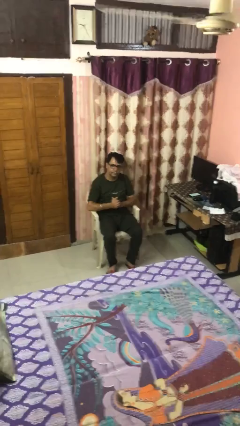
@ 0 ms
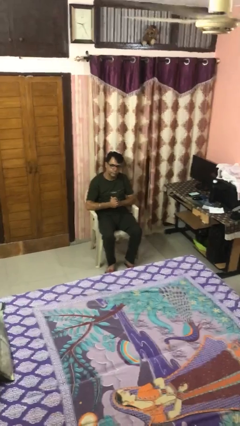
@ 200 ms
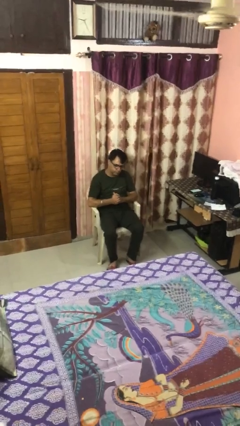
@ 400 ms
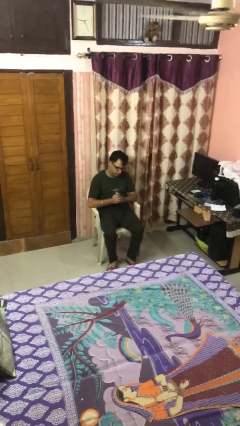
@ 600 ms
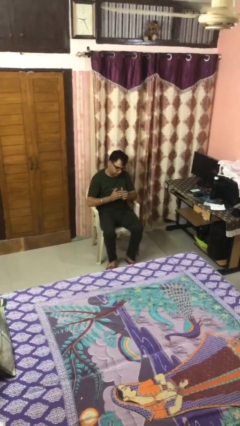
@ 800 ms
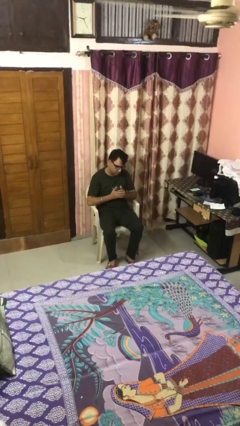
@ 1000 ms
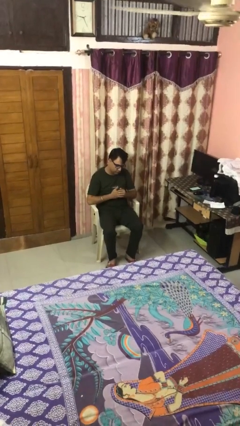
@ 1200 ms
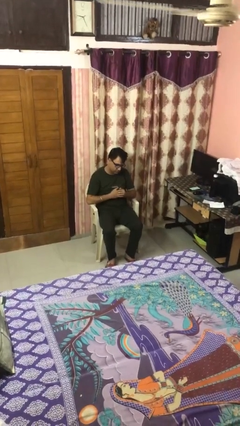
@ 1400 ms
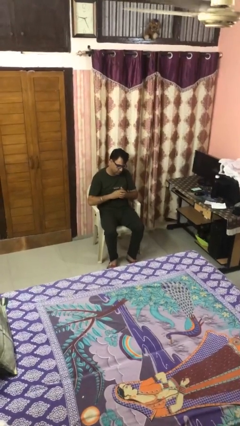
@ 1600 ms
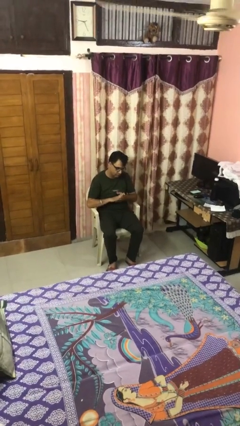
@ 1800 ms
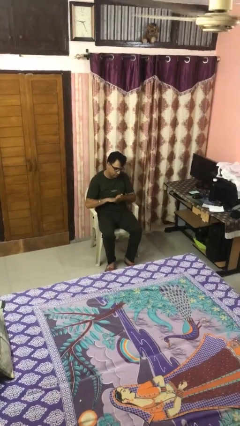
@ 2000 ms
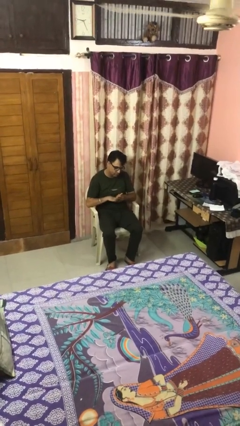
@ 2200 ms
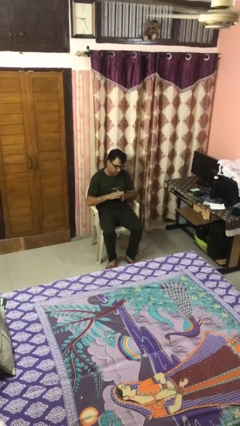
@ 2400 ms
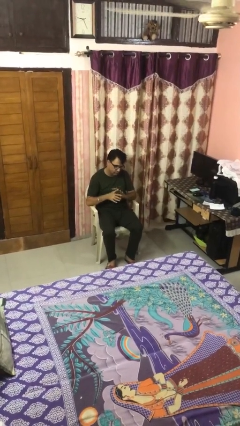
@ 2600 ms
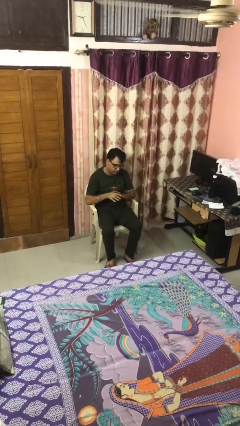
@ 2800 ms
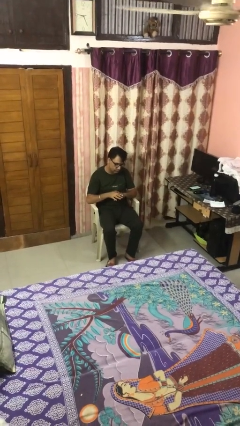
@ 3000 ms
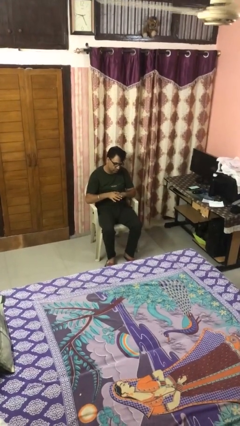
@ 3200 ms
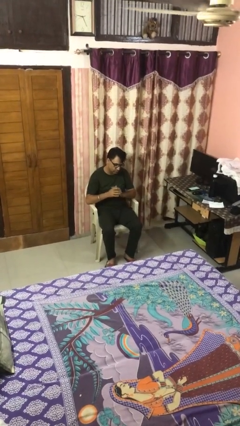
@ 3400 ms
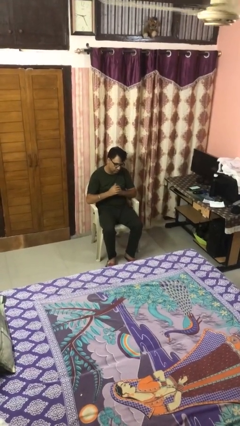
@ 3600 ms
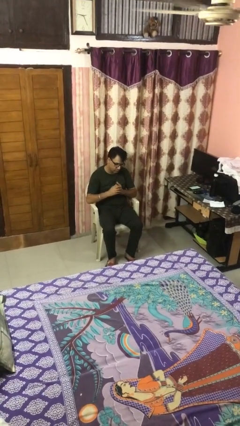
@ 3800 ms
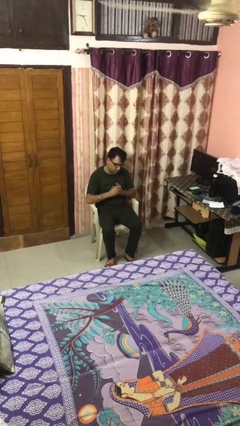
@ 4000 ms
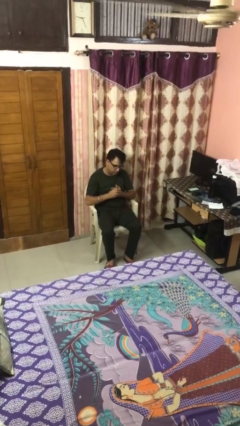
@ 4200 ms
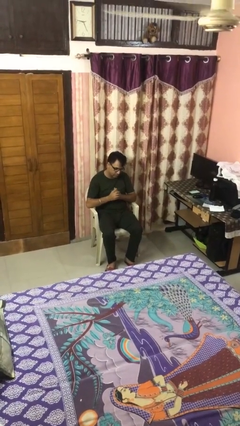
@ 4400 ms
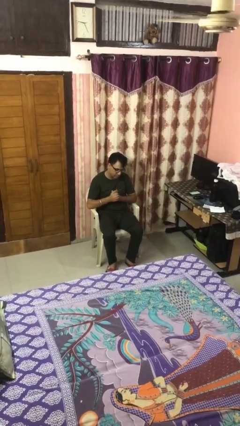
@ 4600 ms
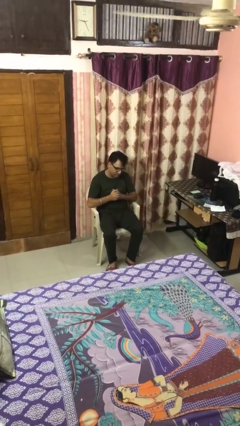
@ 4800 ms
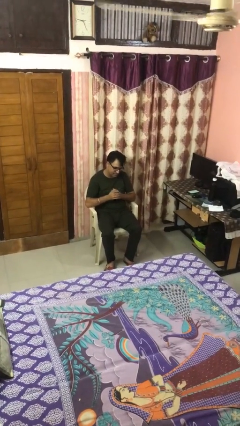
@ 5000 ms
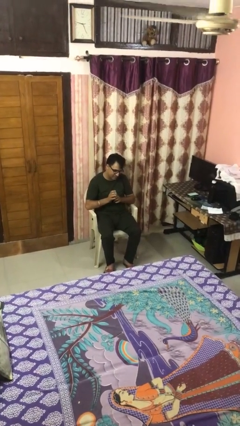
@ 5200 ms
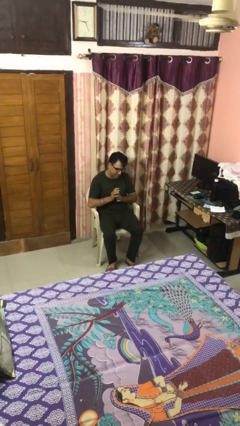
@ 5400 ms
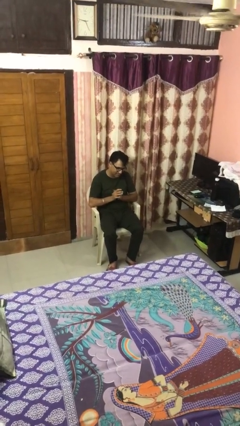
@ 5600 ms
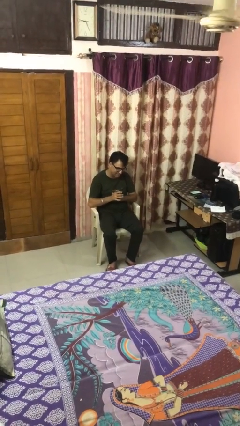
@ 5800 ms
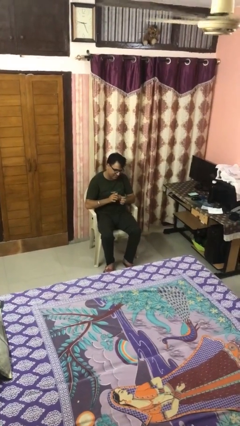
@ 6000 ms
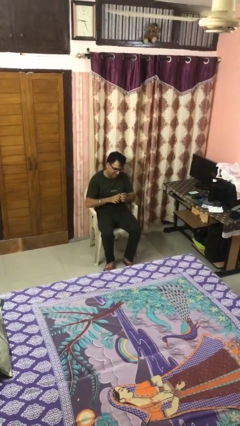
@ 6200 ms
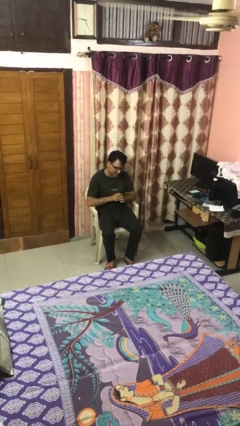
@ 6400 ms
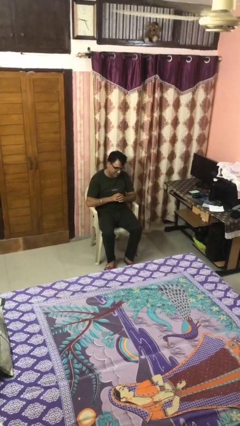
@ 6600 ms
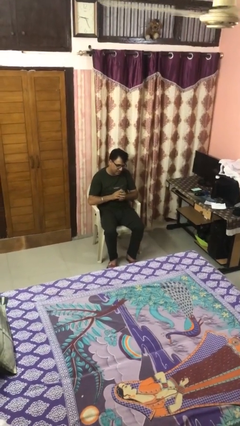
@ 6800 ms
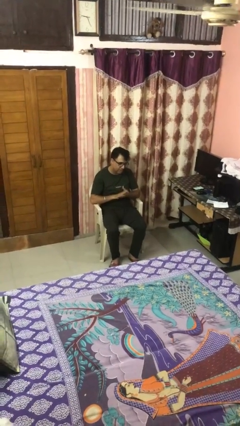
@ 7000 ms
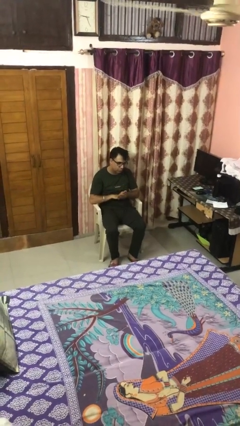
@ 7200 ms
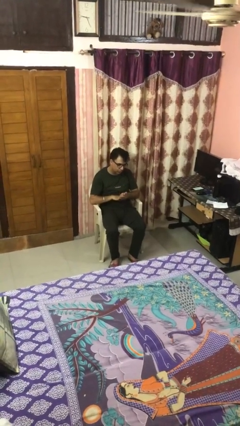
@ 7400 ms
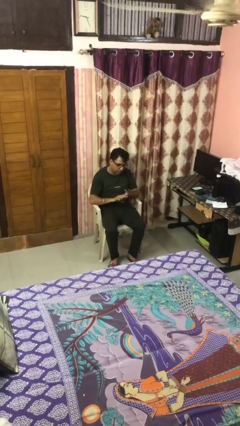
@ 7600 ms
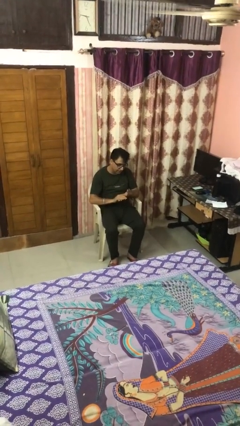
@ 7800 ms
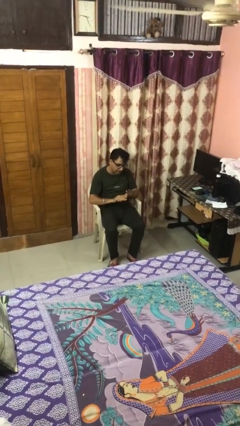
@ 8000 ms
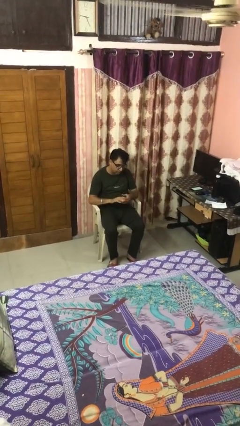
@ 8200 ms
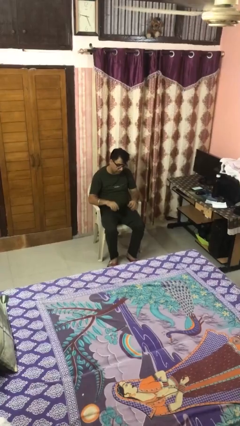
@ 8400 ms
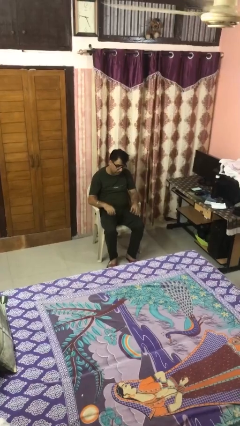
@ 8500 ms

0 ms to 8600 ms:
person cracks knuckles

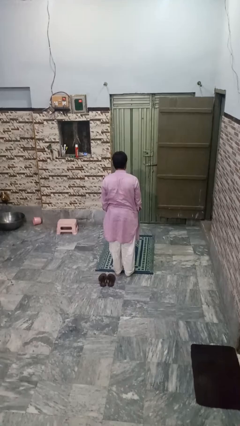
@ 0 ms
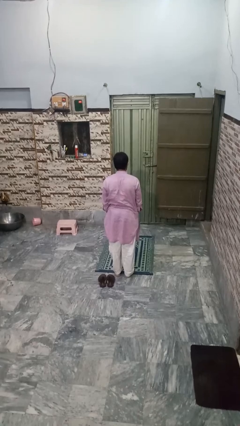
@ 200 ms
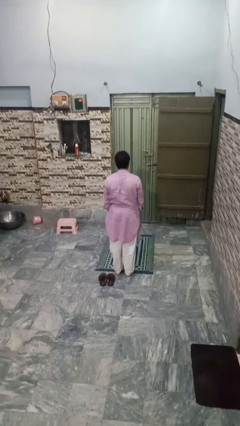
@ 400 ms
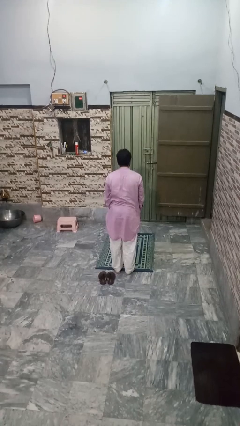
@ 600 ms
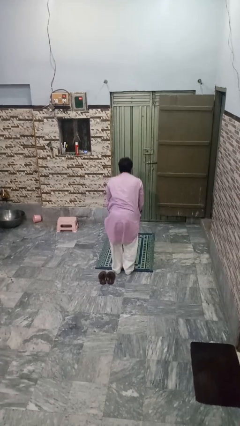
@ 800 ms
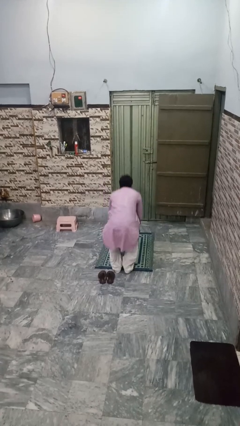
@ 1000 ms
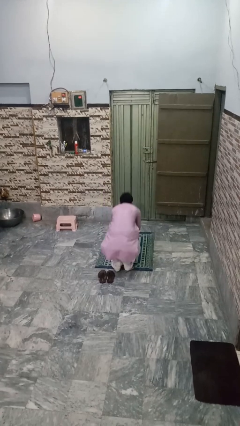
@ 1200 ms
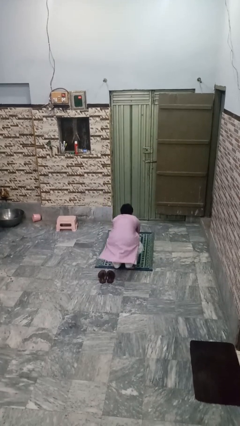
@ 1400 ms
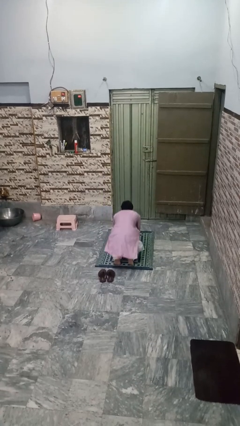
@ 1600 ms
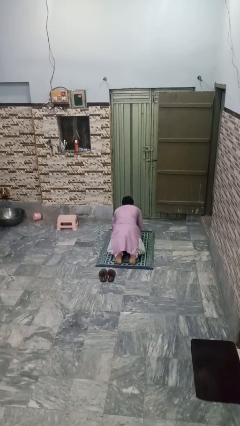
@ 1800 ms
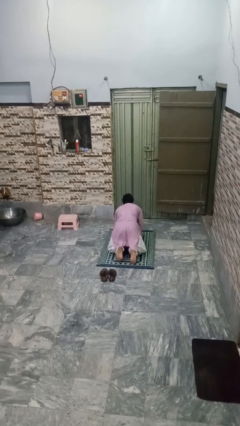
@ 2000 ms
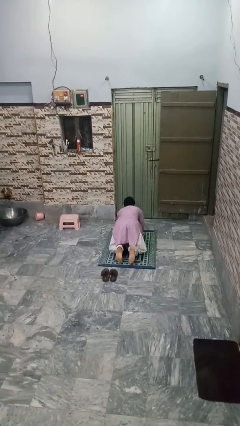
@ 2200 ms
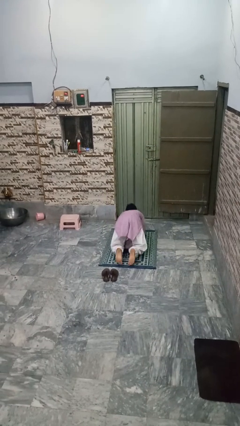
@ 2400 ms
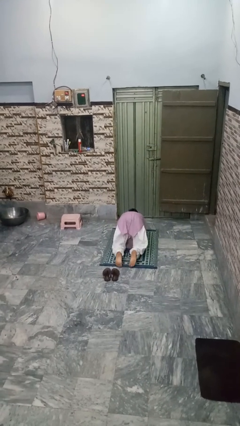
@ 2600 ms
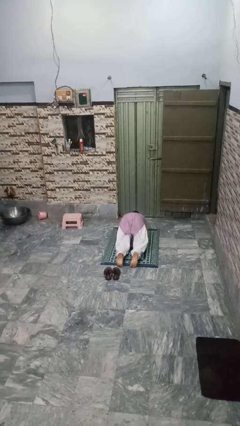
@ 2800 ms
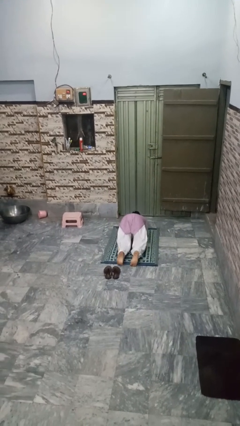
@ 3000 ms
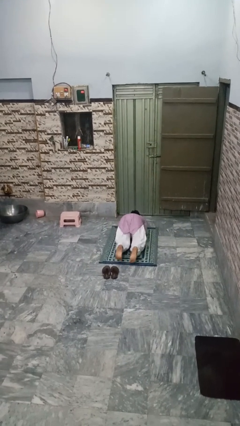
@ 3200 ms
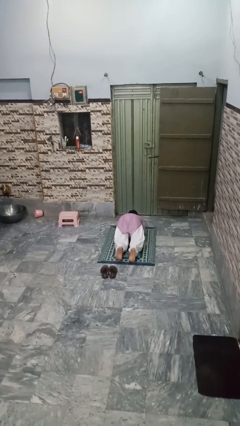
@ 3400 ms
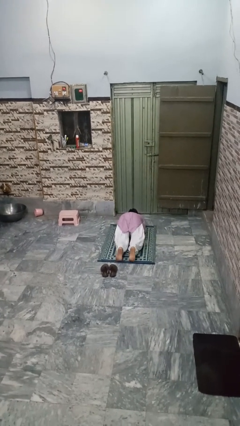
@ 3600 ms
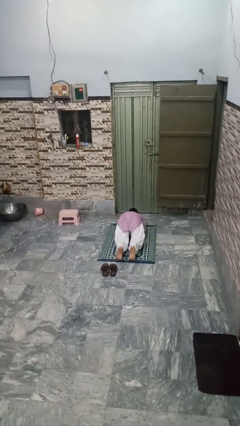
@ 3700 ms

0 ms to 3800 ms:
person exercises with plank

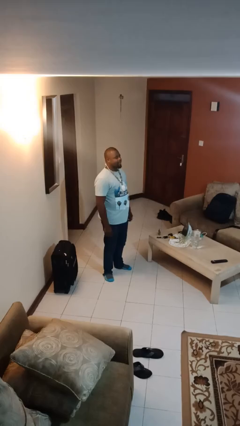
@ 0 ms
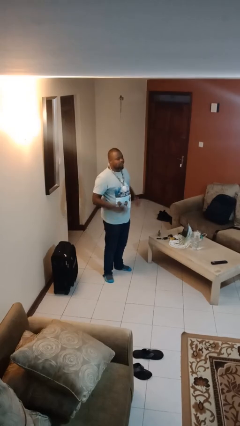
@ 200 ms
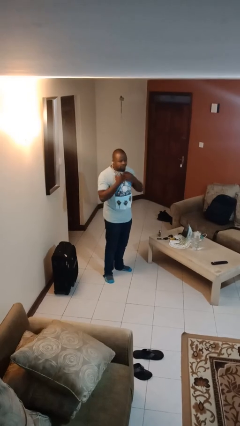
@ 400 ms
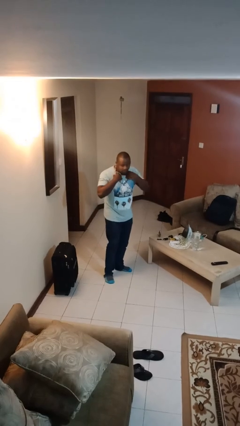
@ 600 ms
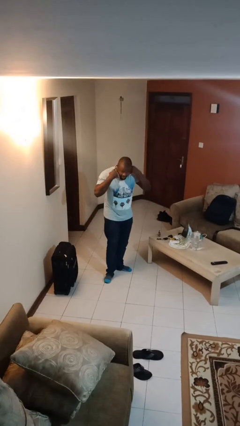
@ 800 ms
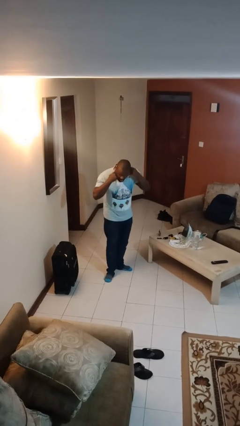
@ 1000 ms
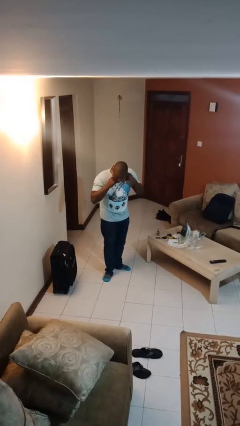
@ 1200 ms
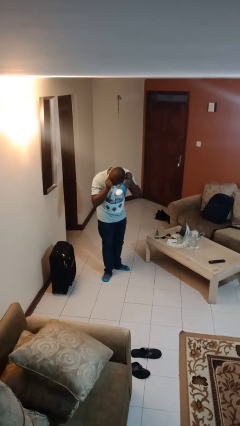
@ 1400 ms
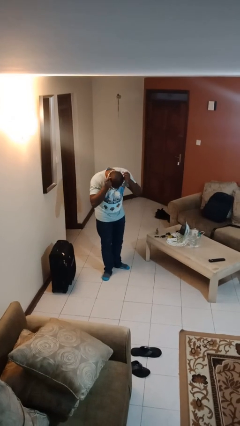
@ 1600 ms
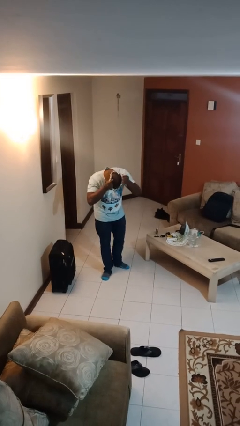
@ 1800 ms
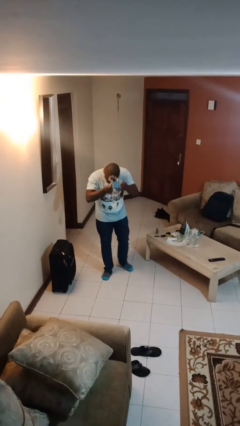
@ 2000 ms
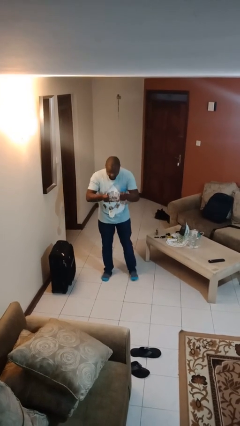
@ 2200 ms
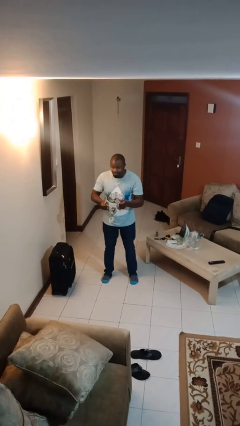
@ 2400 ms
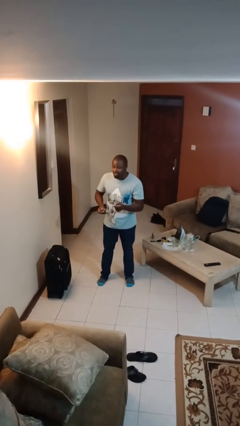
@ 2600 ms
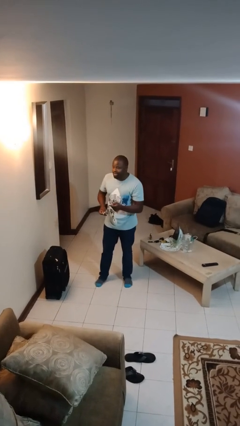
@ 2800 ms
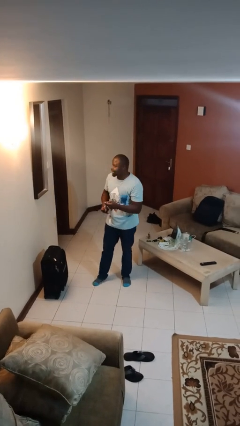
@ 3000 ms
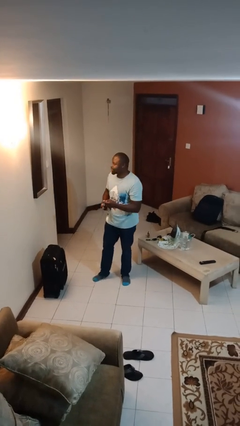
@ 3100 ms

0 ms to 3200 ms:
person takes off necklace

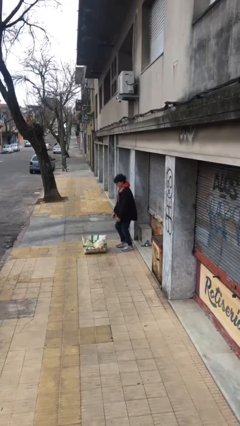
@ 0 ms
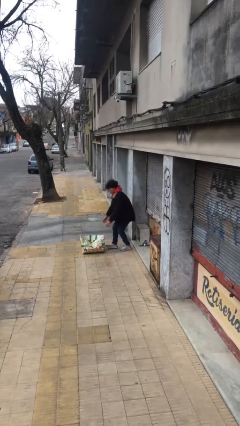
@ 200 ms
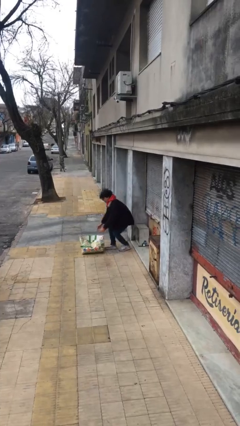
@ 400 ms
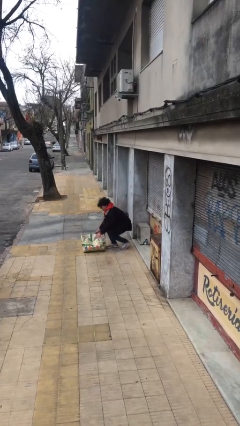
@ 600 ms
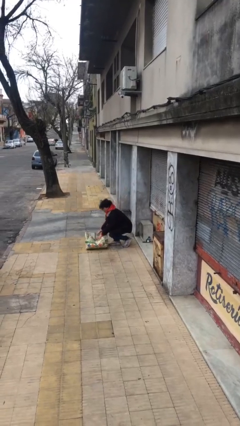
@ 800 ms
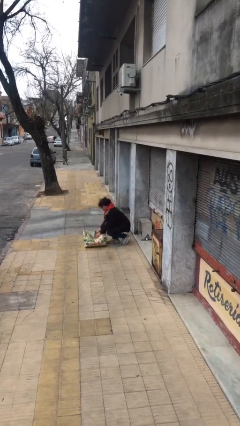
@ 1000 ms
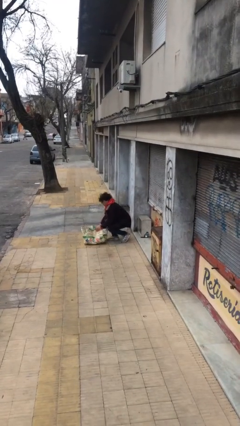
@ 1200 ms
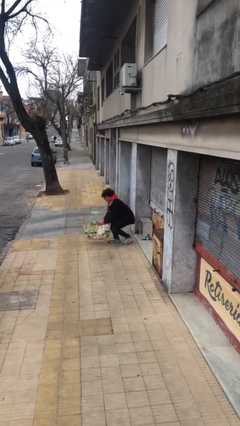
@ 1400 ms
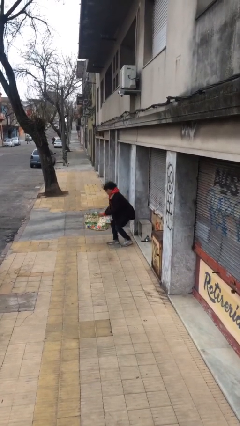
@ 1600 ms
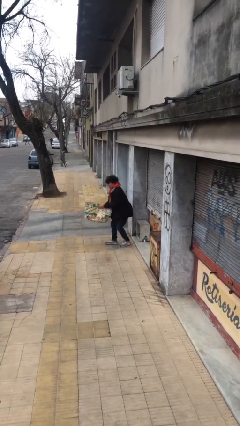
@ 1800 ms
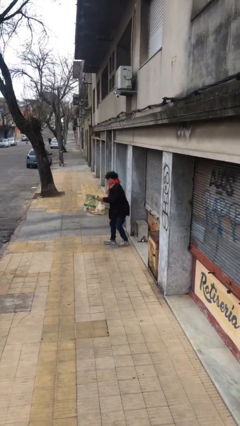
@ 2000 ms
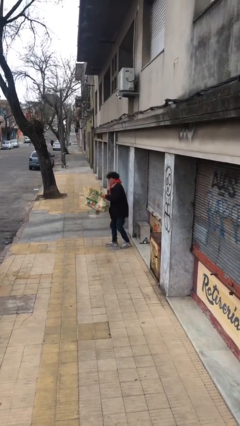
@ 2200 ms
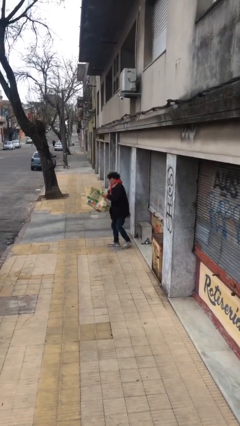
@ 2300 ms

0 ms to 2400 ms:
person picks up object from floor
